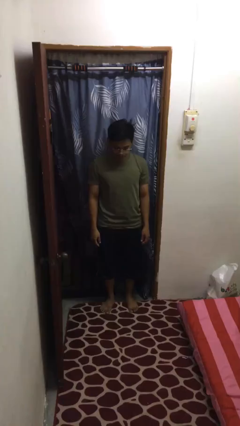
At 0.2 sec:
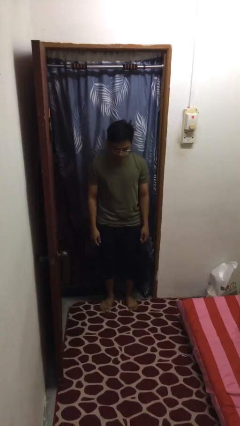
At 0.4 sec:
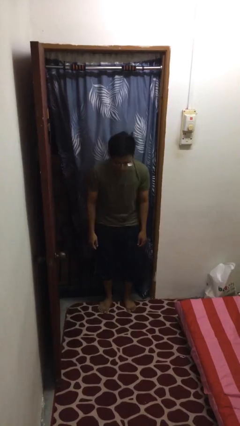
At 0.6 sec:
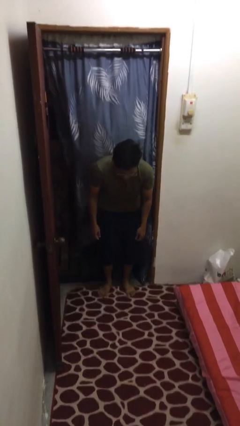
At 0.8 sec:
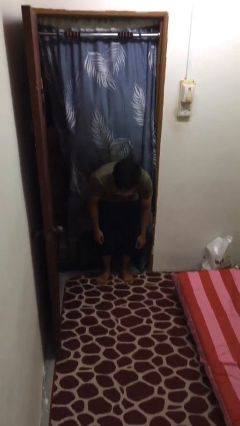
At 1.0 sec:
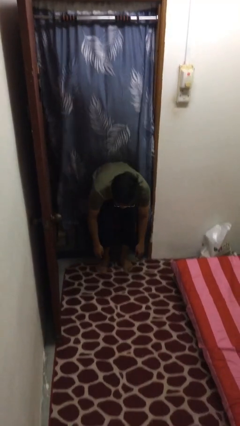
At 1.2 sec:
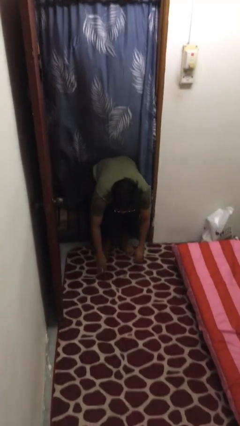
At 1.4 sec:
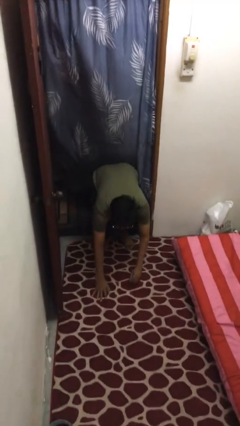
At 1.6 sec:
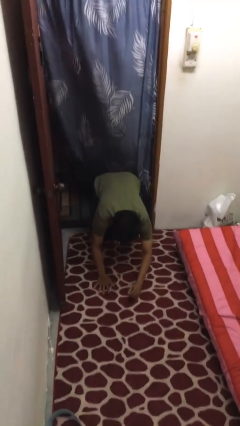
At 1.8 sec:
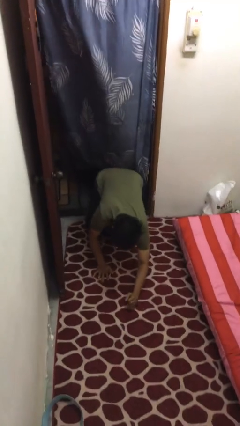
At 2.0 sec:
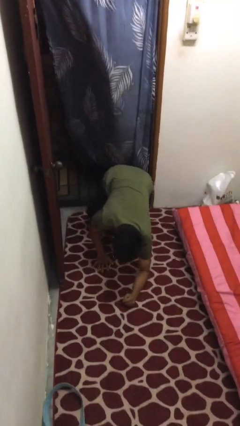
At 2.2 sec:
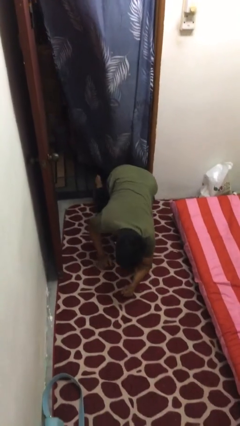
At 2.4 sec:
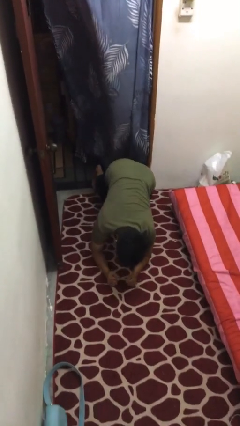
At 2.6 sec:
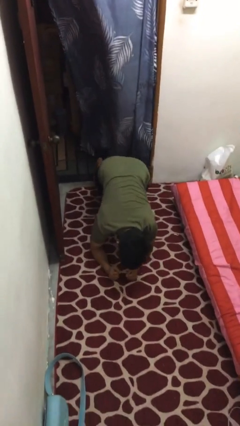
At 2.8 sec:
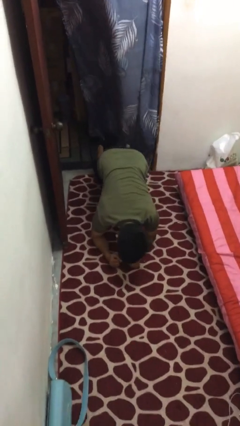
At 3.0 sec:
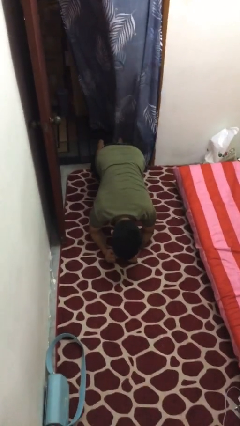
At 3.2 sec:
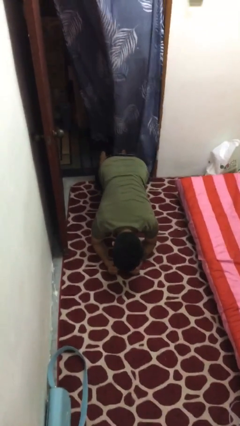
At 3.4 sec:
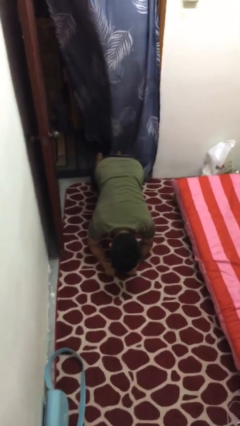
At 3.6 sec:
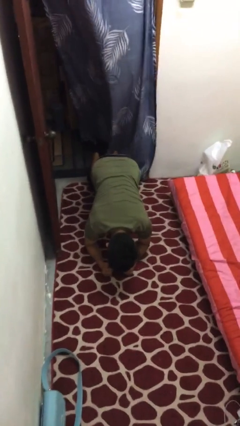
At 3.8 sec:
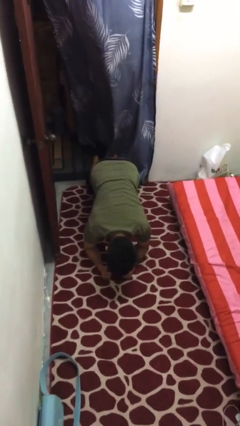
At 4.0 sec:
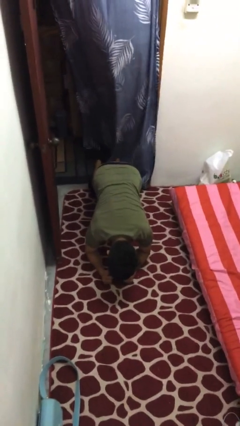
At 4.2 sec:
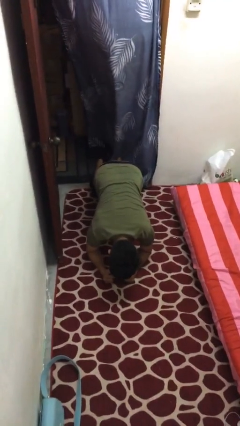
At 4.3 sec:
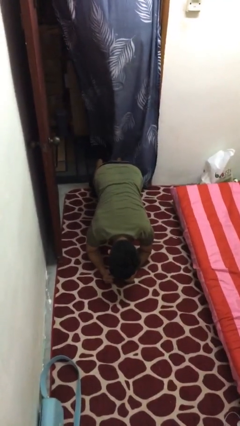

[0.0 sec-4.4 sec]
person exercises with plank

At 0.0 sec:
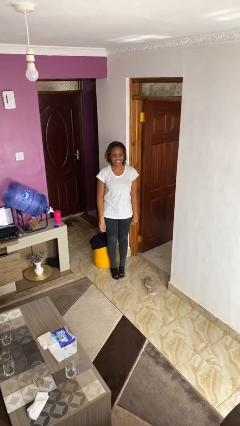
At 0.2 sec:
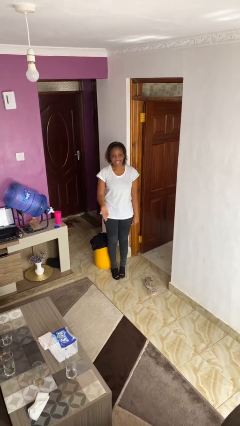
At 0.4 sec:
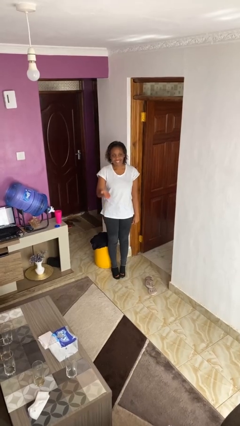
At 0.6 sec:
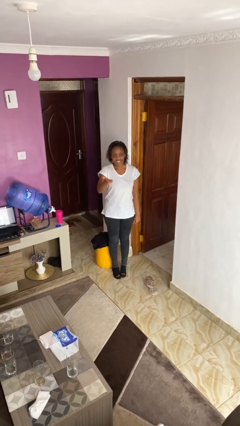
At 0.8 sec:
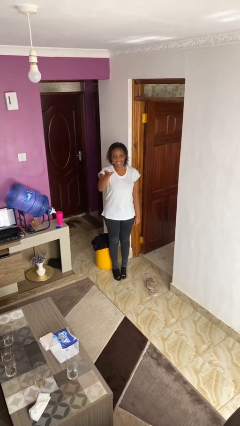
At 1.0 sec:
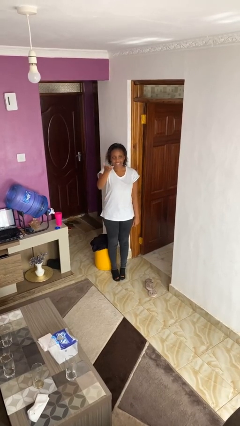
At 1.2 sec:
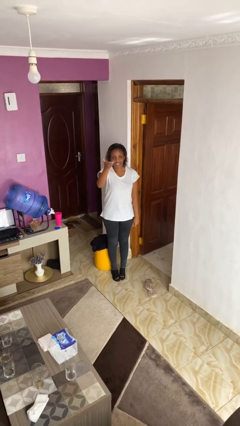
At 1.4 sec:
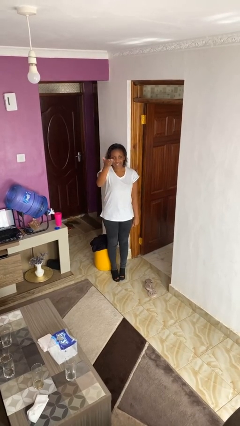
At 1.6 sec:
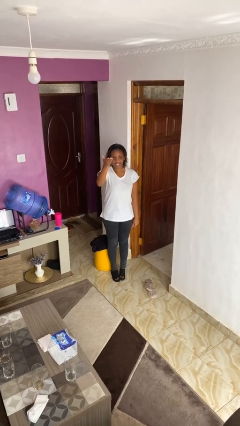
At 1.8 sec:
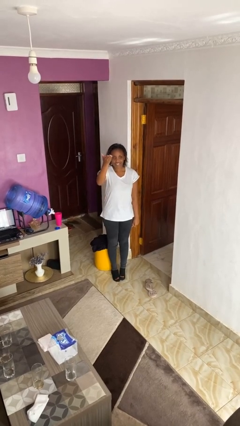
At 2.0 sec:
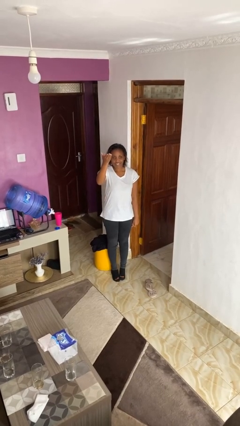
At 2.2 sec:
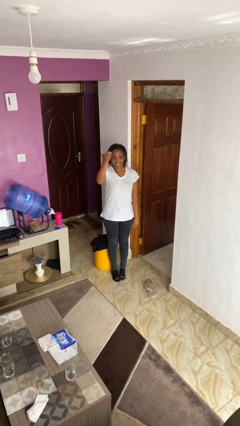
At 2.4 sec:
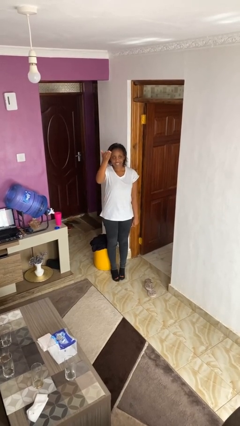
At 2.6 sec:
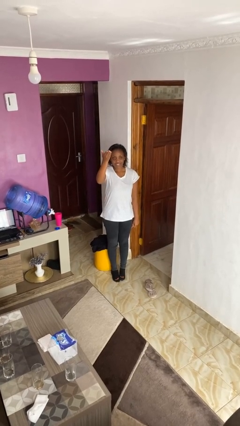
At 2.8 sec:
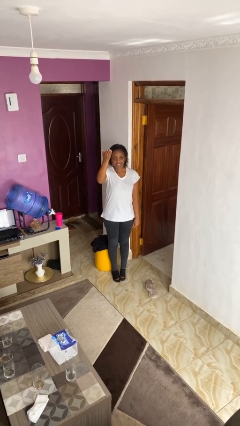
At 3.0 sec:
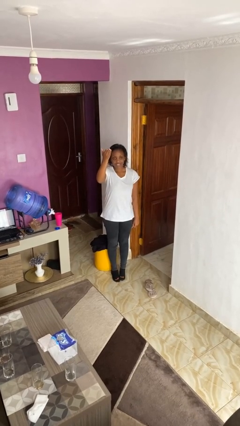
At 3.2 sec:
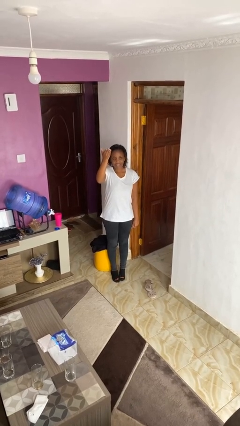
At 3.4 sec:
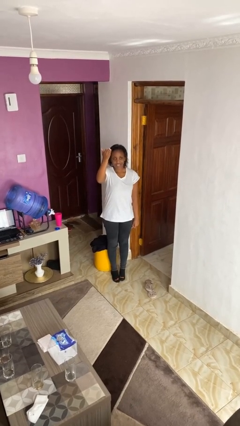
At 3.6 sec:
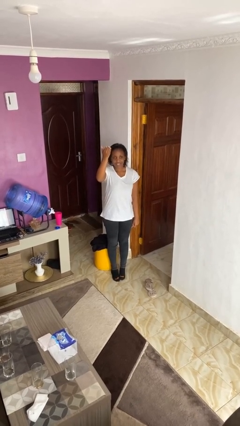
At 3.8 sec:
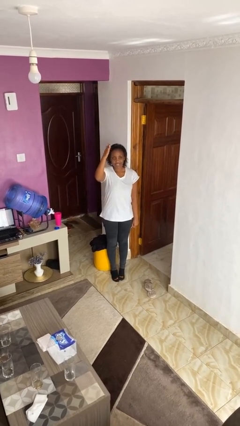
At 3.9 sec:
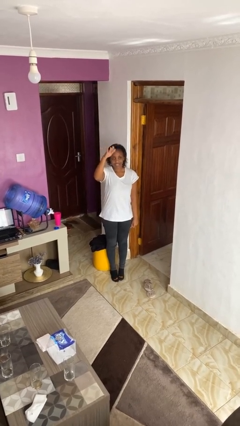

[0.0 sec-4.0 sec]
person gestures swipe up

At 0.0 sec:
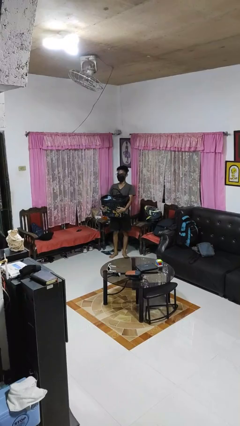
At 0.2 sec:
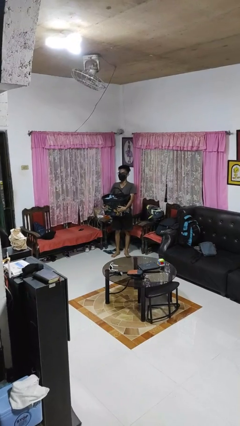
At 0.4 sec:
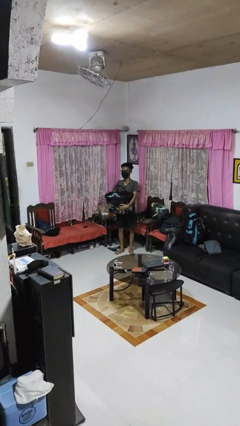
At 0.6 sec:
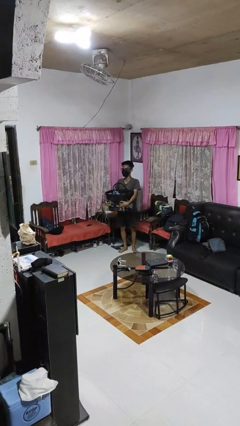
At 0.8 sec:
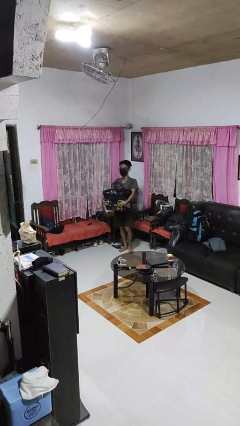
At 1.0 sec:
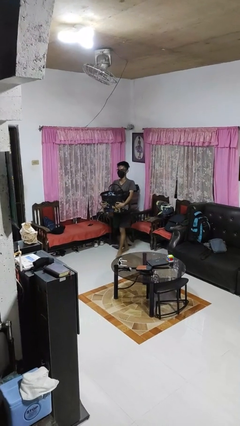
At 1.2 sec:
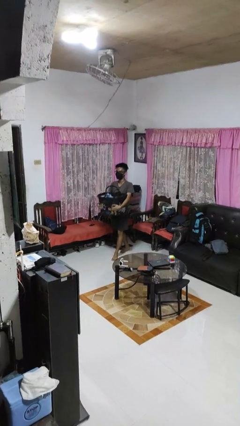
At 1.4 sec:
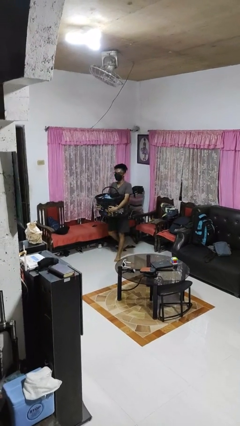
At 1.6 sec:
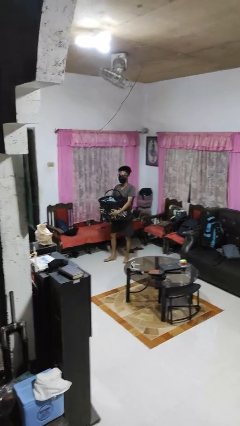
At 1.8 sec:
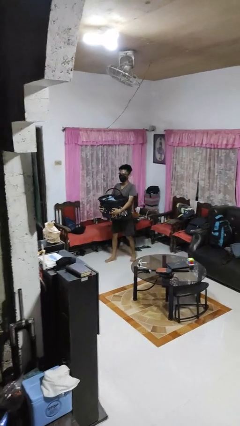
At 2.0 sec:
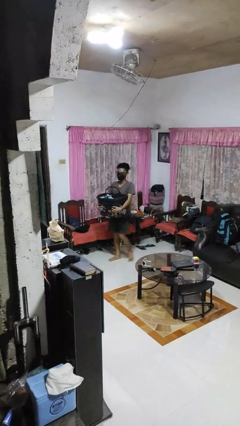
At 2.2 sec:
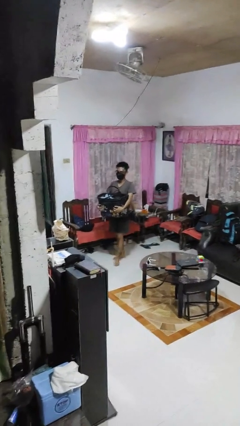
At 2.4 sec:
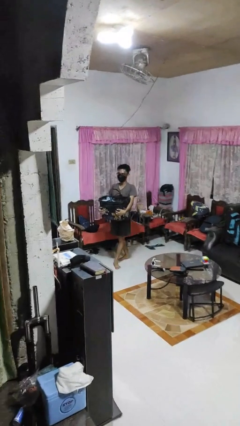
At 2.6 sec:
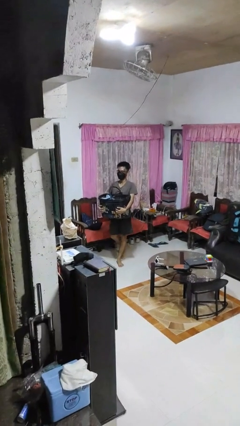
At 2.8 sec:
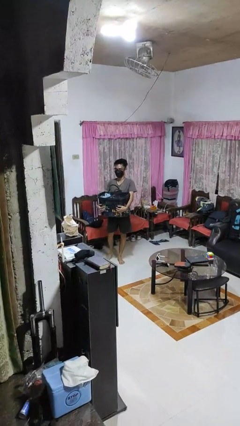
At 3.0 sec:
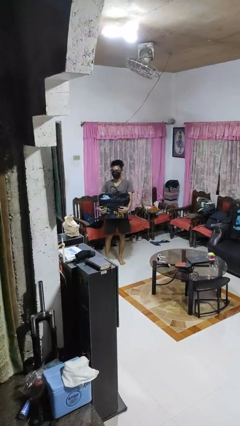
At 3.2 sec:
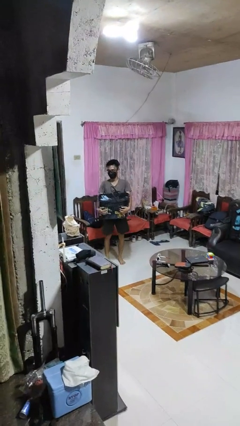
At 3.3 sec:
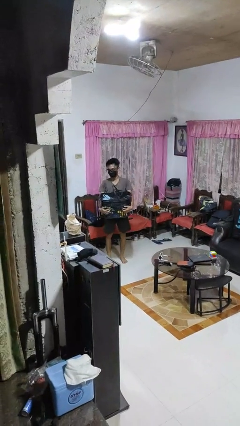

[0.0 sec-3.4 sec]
person carries laundry basket

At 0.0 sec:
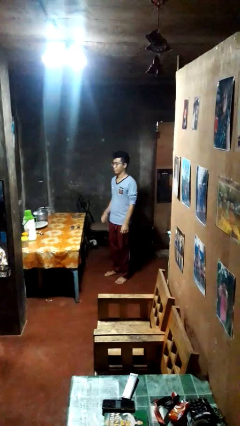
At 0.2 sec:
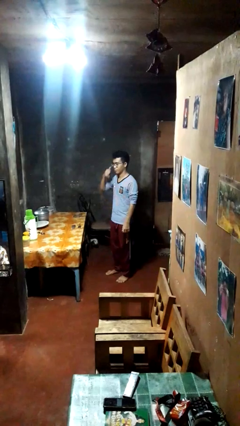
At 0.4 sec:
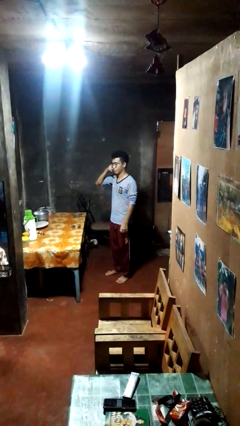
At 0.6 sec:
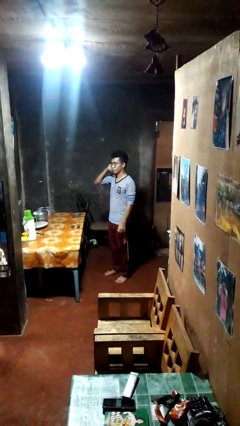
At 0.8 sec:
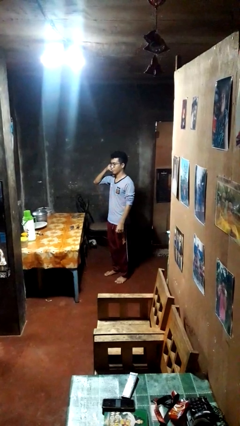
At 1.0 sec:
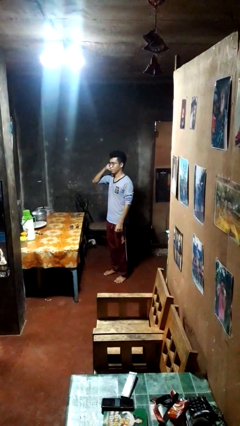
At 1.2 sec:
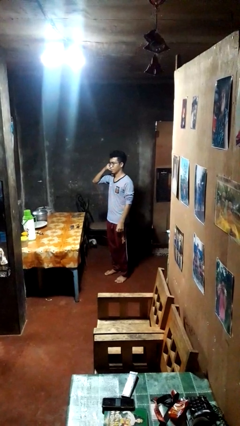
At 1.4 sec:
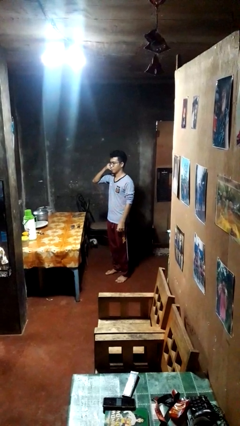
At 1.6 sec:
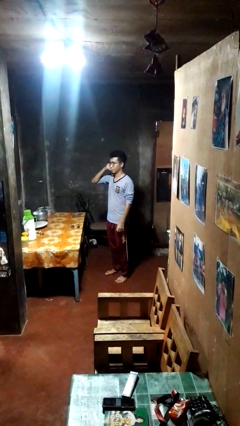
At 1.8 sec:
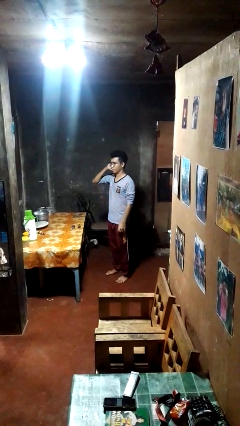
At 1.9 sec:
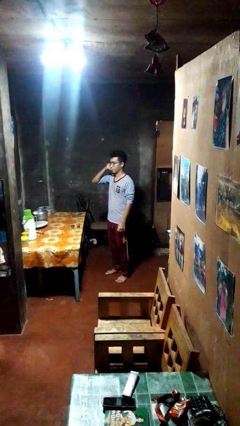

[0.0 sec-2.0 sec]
person gestures call me

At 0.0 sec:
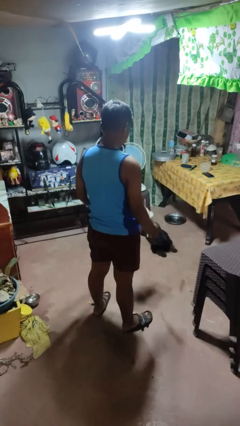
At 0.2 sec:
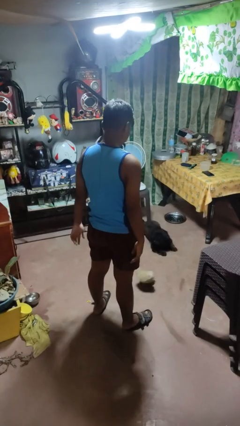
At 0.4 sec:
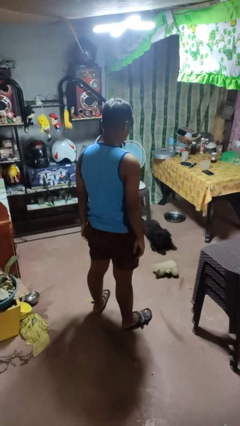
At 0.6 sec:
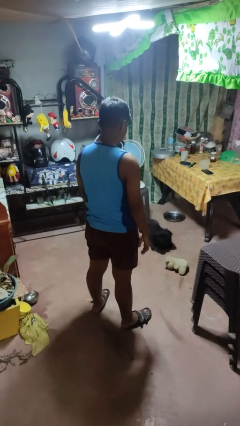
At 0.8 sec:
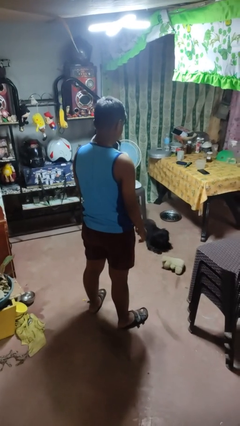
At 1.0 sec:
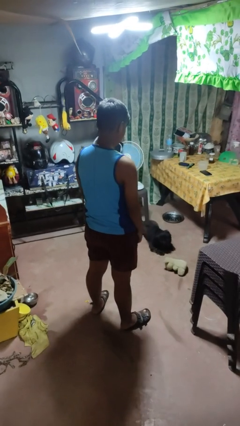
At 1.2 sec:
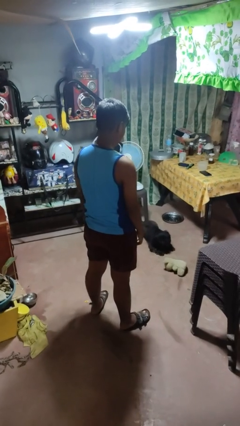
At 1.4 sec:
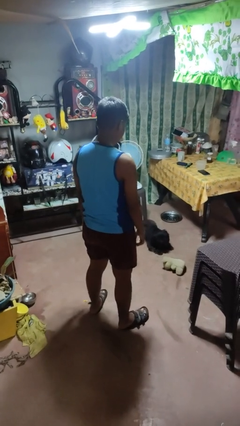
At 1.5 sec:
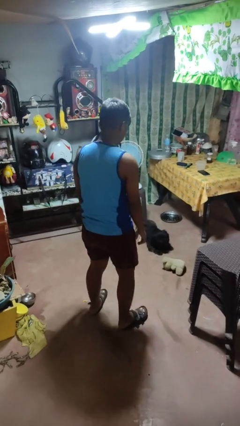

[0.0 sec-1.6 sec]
person drops object

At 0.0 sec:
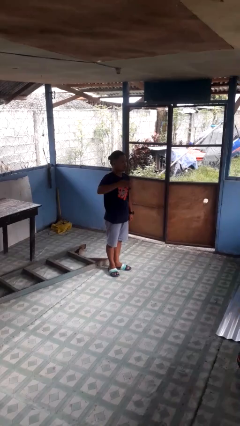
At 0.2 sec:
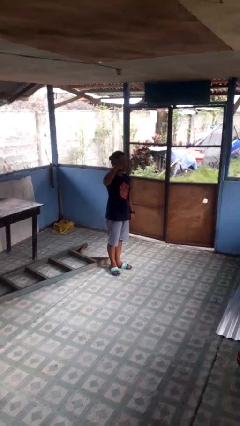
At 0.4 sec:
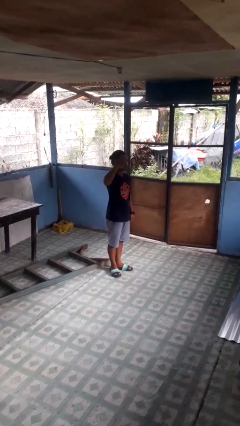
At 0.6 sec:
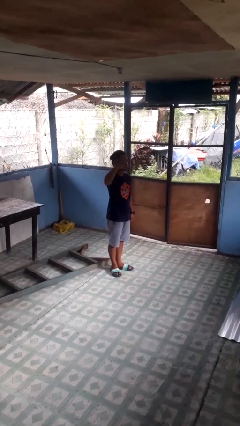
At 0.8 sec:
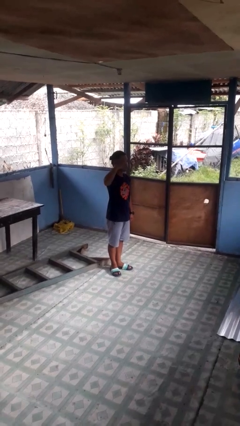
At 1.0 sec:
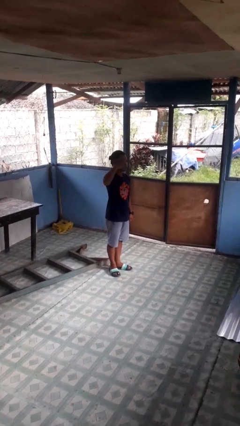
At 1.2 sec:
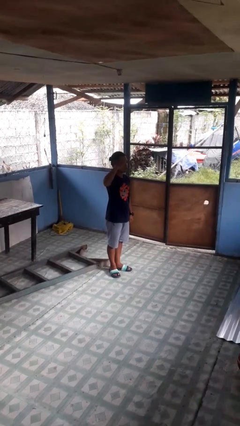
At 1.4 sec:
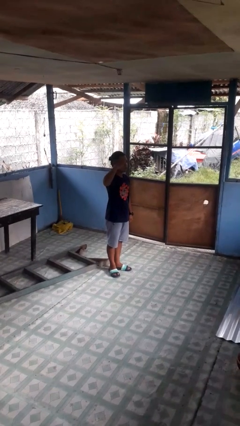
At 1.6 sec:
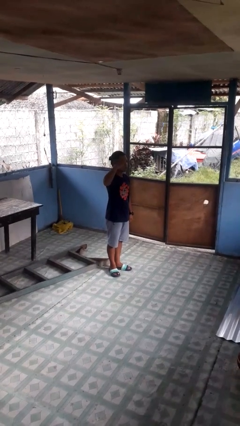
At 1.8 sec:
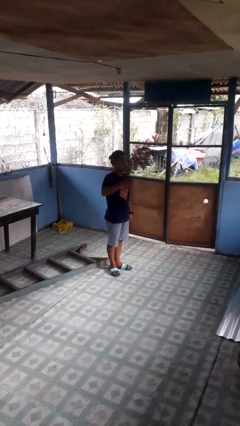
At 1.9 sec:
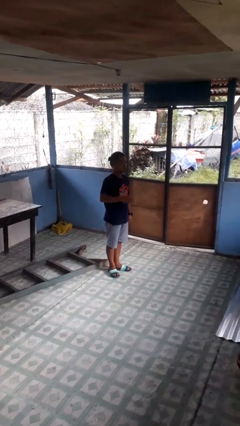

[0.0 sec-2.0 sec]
person salutes
